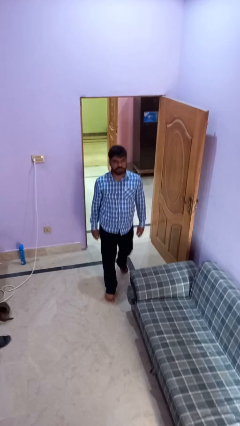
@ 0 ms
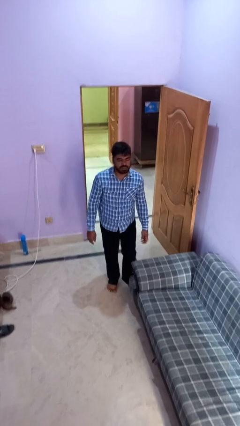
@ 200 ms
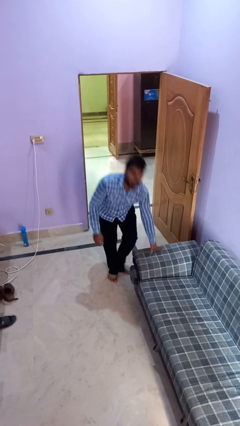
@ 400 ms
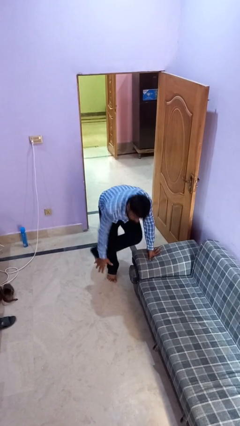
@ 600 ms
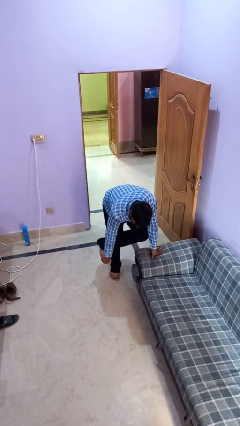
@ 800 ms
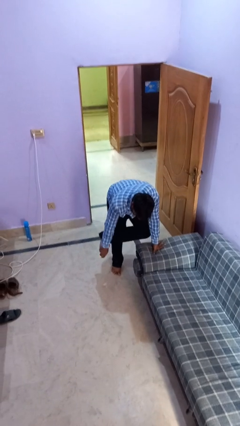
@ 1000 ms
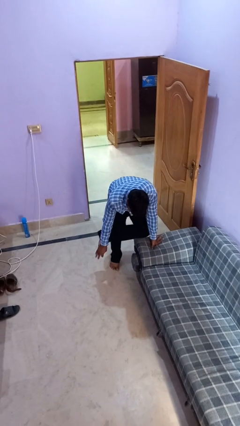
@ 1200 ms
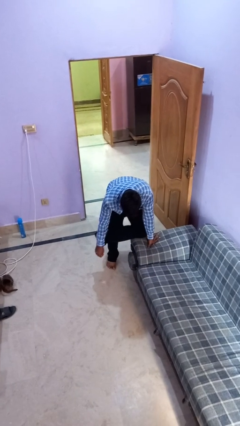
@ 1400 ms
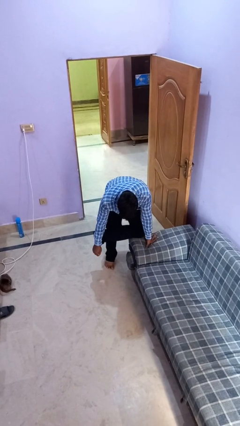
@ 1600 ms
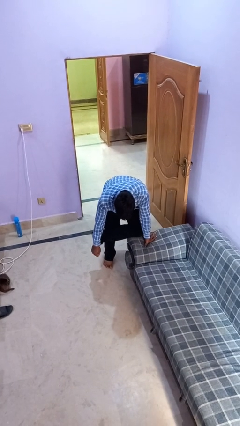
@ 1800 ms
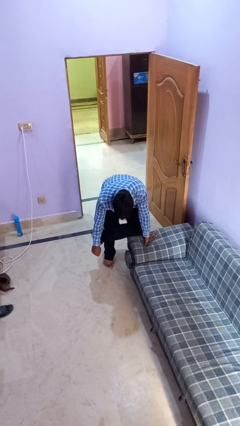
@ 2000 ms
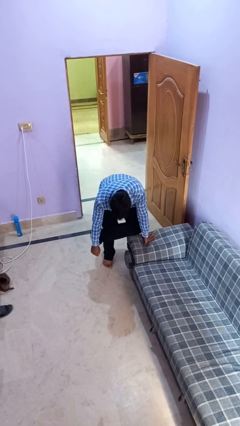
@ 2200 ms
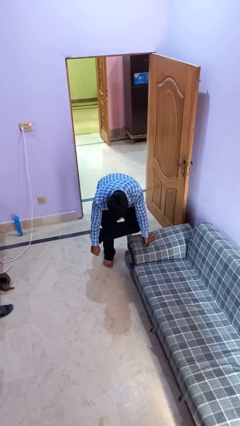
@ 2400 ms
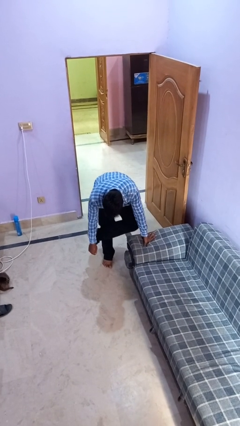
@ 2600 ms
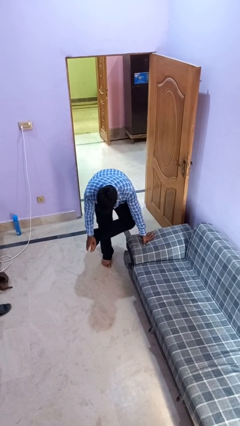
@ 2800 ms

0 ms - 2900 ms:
person stubs toe

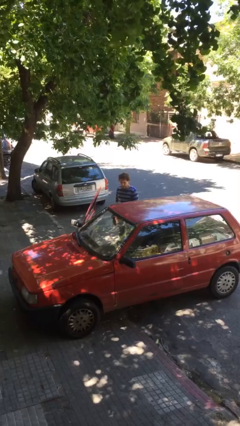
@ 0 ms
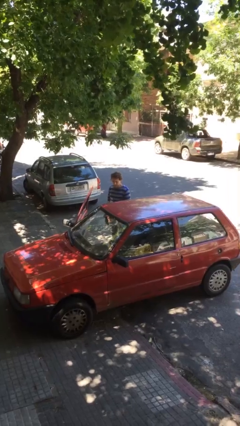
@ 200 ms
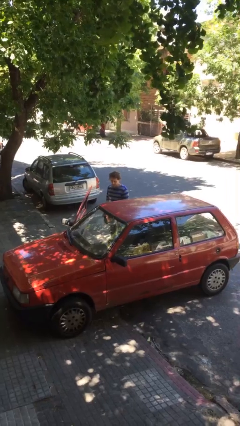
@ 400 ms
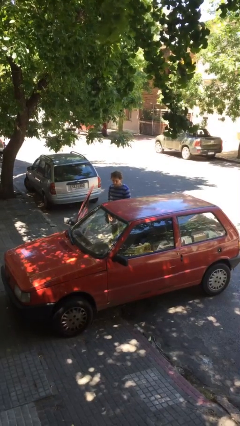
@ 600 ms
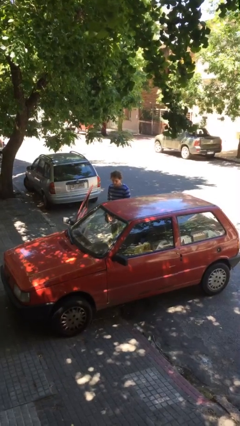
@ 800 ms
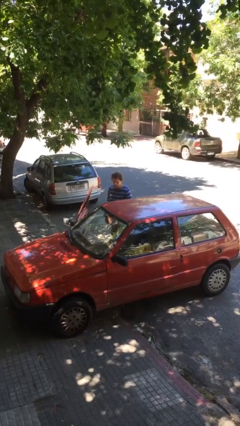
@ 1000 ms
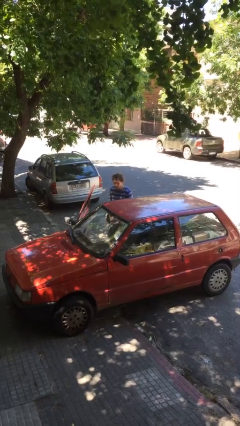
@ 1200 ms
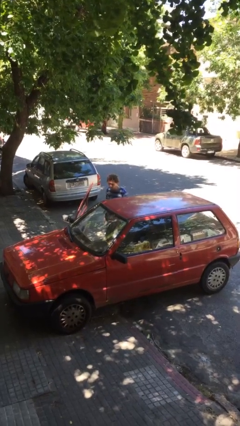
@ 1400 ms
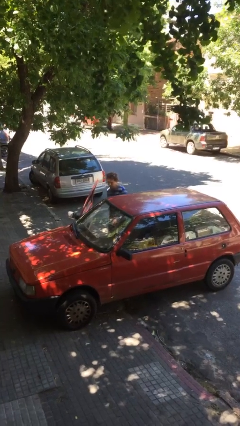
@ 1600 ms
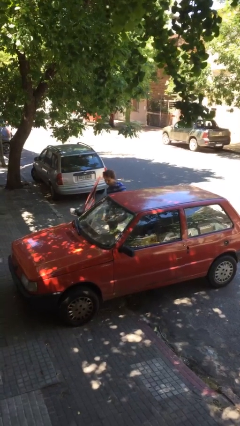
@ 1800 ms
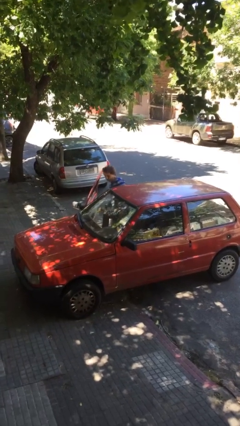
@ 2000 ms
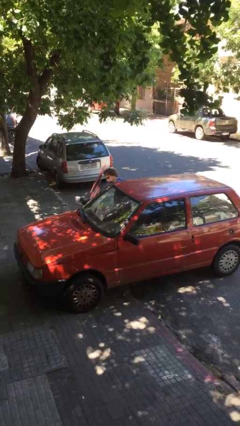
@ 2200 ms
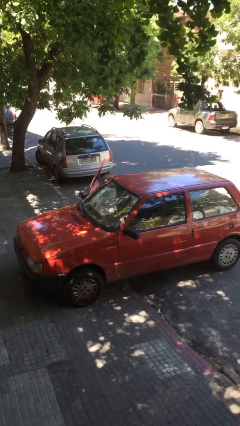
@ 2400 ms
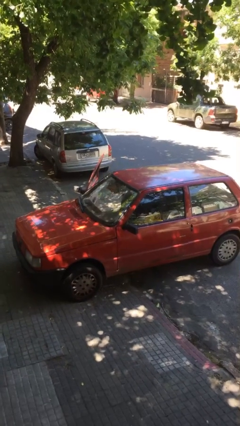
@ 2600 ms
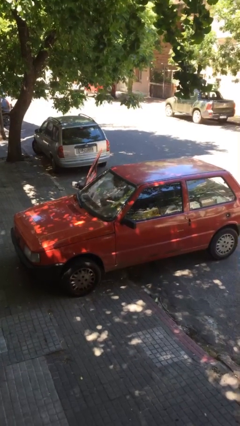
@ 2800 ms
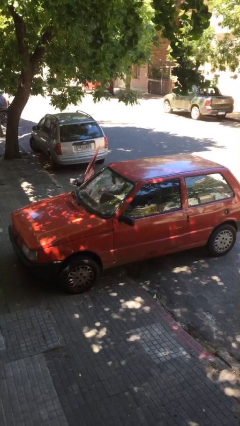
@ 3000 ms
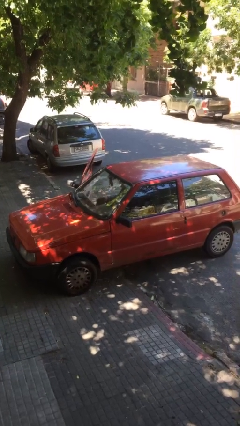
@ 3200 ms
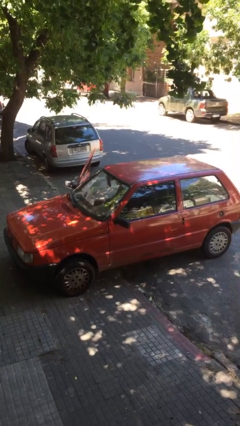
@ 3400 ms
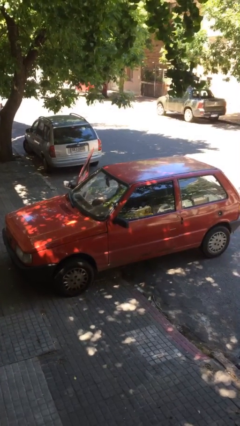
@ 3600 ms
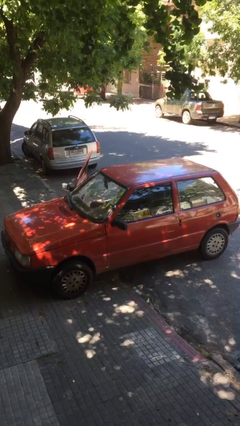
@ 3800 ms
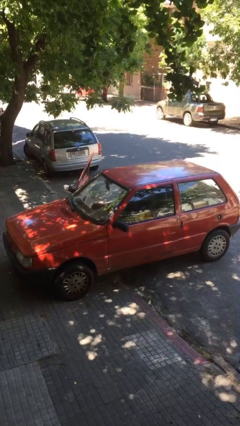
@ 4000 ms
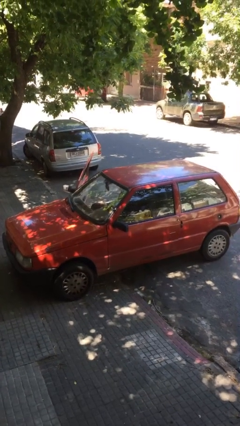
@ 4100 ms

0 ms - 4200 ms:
person enters car

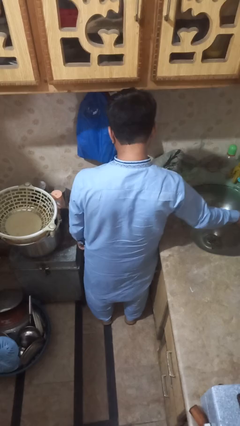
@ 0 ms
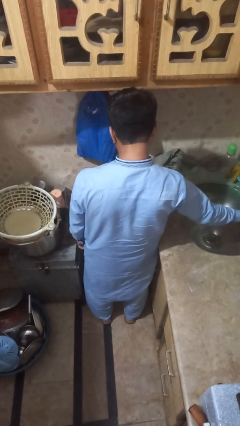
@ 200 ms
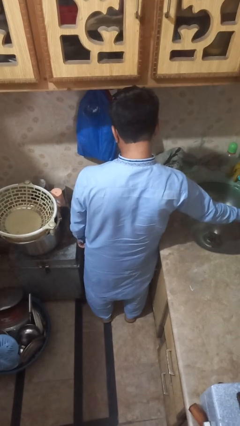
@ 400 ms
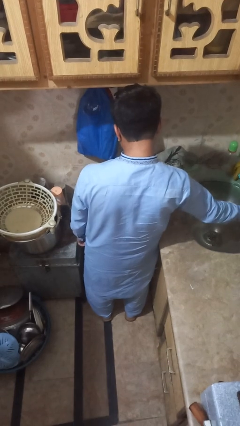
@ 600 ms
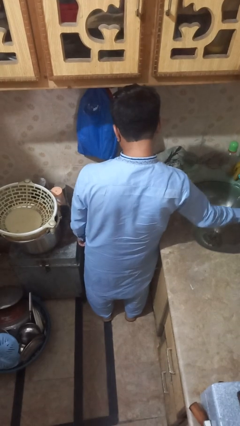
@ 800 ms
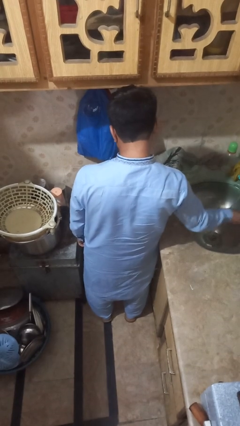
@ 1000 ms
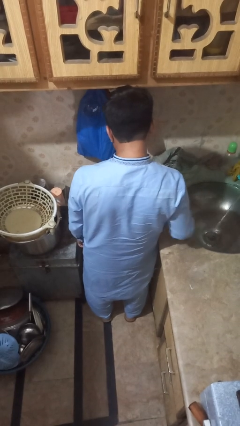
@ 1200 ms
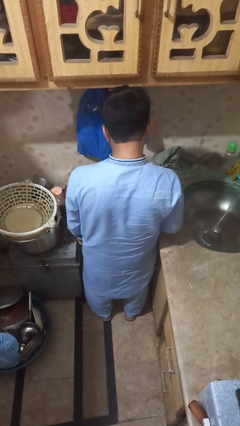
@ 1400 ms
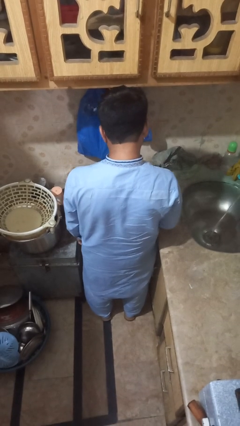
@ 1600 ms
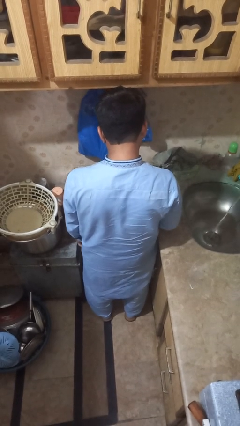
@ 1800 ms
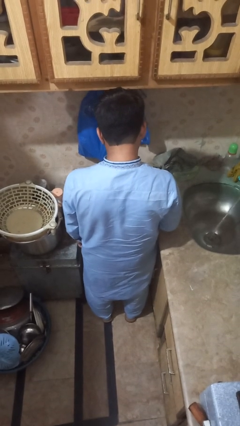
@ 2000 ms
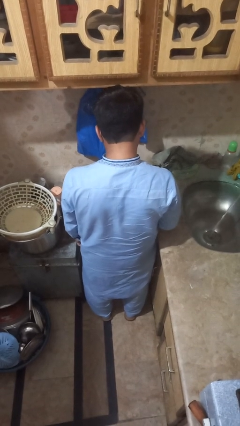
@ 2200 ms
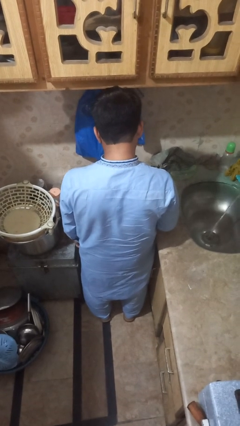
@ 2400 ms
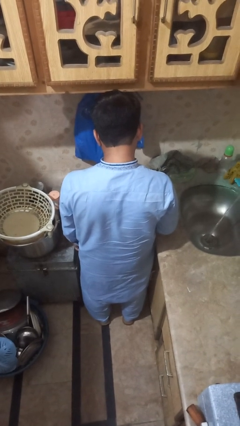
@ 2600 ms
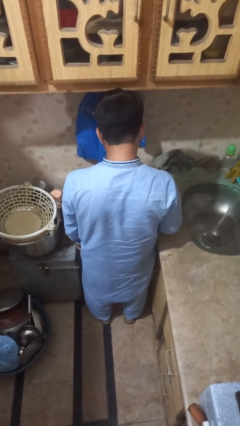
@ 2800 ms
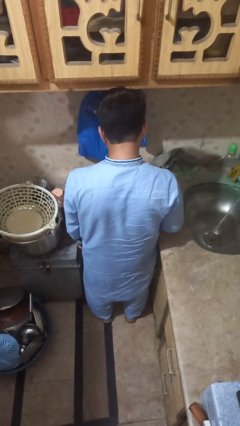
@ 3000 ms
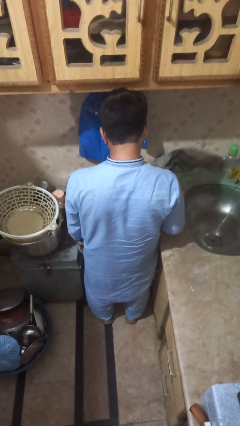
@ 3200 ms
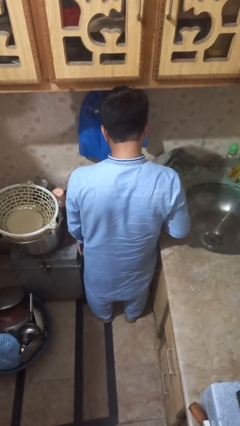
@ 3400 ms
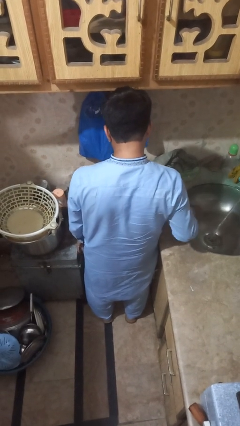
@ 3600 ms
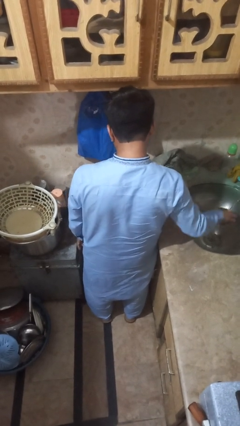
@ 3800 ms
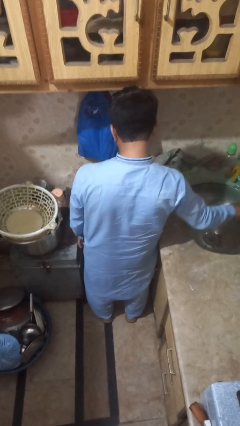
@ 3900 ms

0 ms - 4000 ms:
person turns on faucet

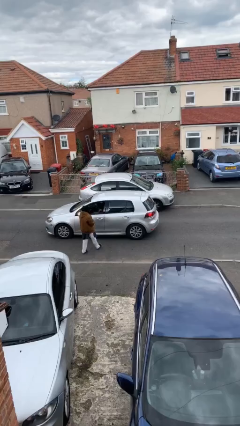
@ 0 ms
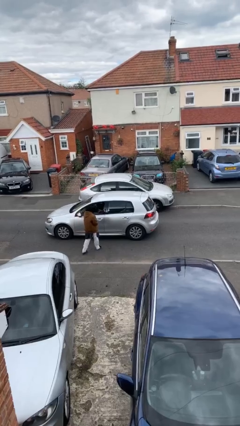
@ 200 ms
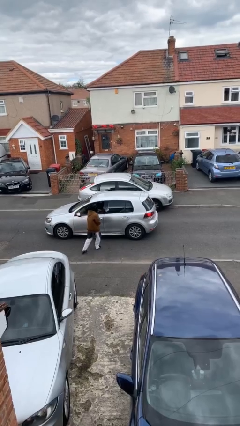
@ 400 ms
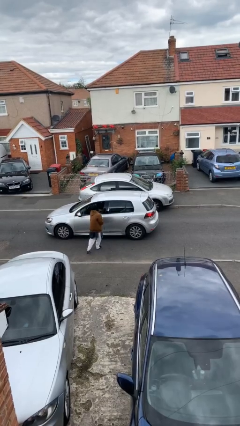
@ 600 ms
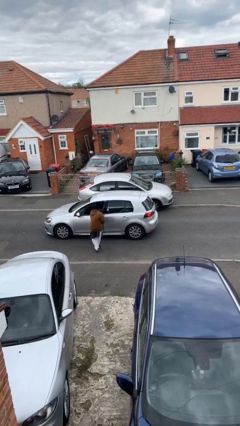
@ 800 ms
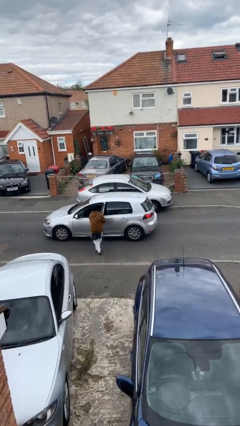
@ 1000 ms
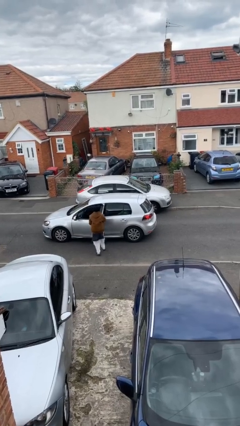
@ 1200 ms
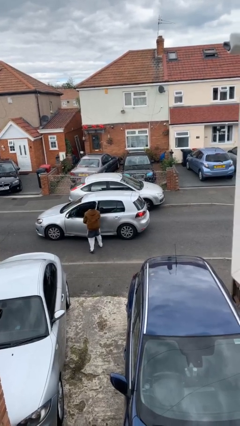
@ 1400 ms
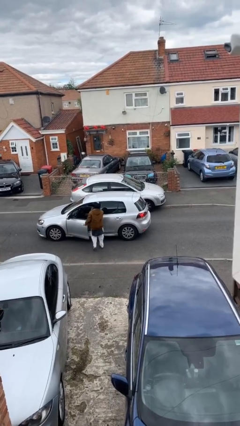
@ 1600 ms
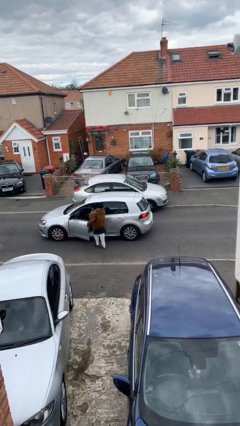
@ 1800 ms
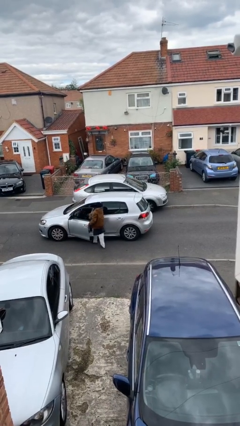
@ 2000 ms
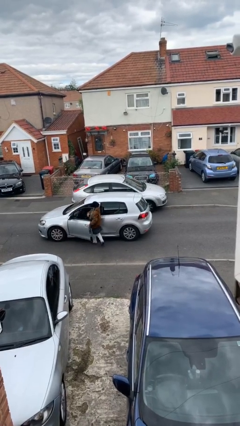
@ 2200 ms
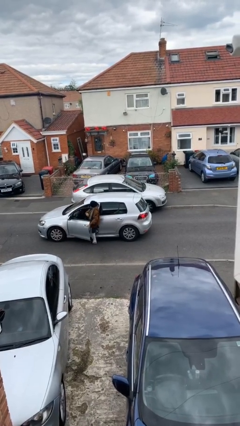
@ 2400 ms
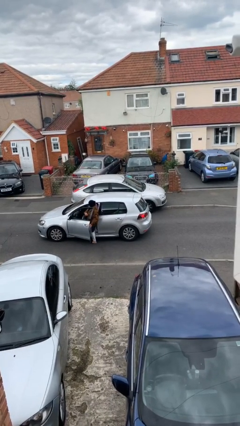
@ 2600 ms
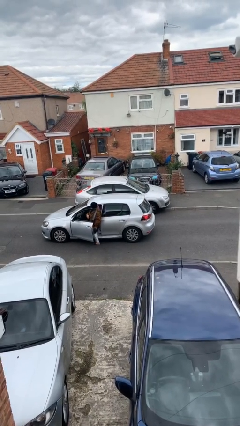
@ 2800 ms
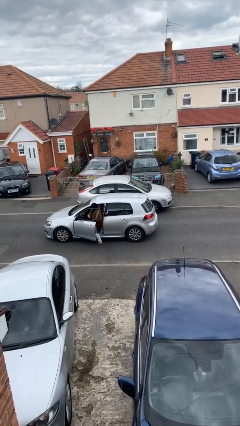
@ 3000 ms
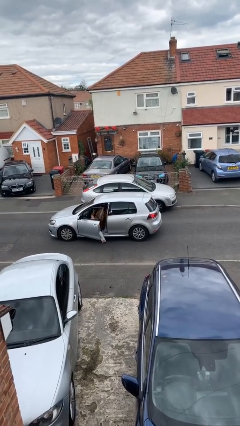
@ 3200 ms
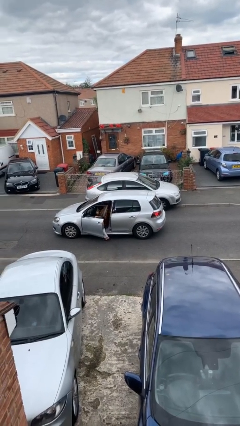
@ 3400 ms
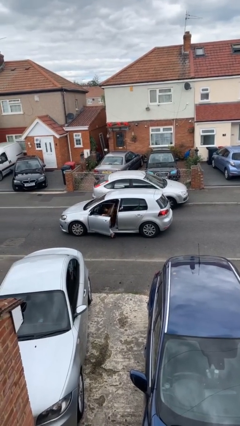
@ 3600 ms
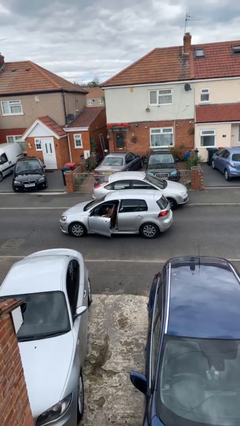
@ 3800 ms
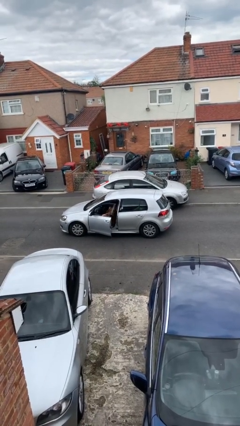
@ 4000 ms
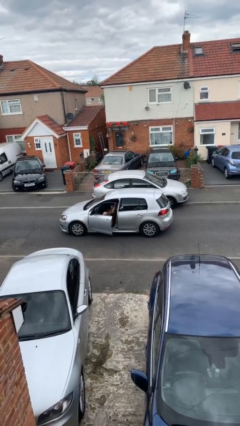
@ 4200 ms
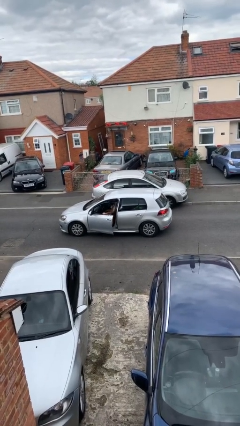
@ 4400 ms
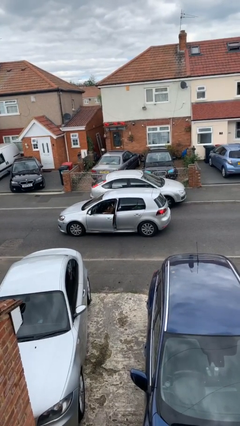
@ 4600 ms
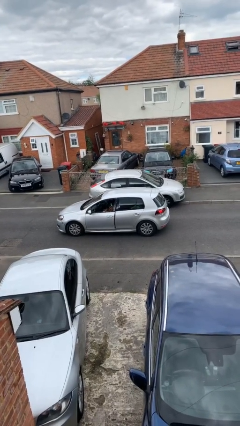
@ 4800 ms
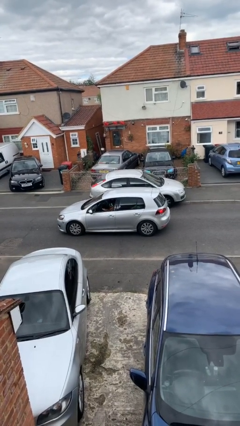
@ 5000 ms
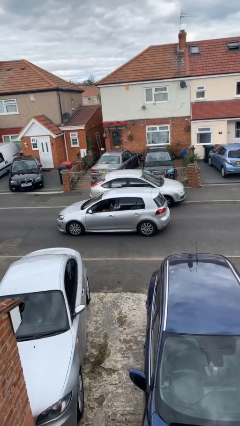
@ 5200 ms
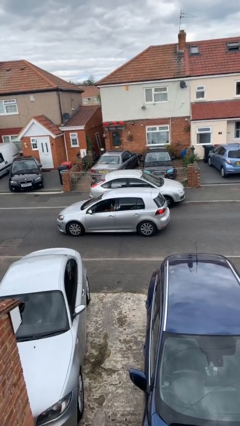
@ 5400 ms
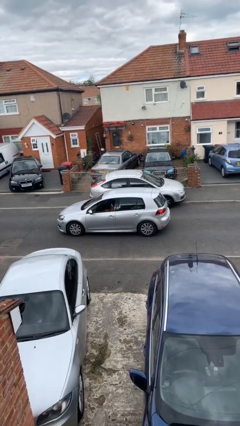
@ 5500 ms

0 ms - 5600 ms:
car picks up person

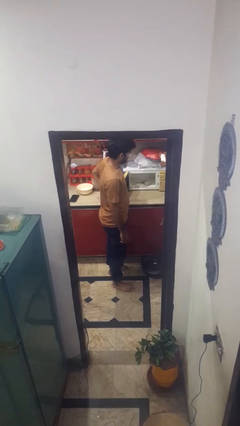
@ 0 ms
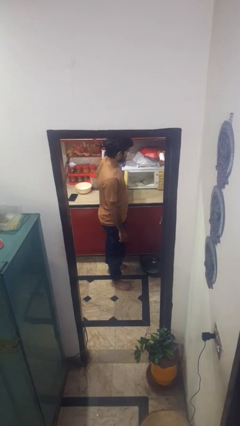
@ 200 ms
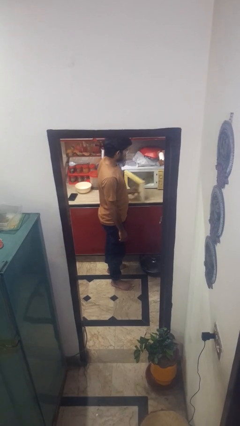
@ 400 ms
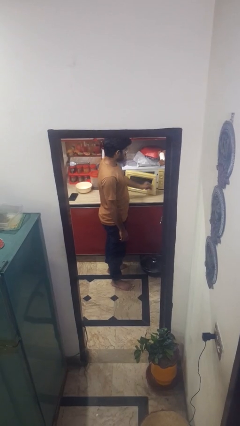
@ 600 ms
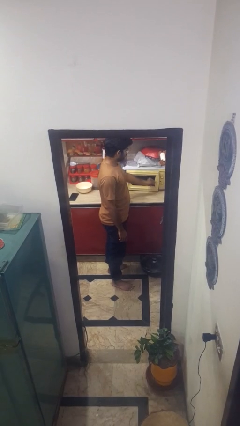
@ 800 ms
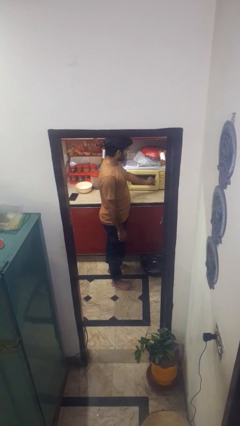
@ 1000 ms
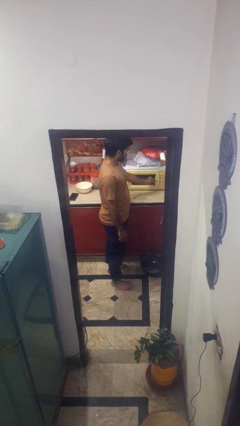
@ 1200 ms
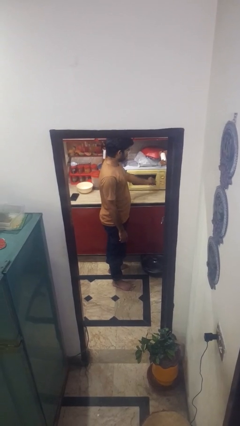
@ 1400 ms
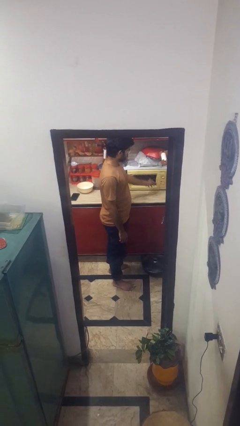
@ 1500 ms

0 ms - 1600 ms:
person closes microwave
